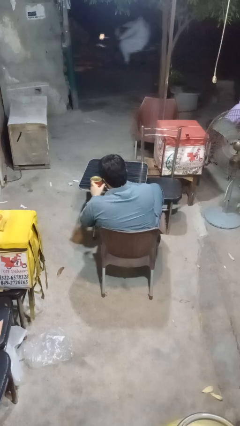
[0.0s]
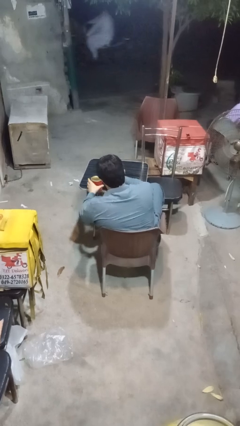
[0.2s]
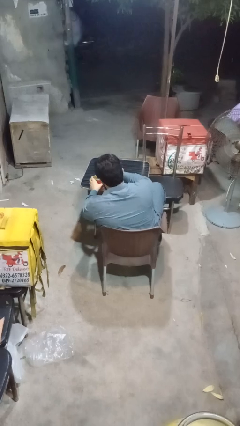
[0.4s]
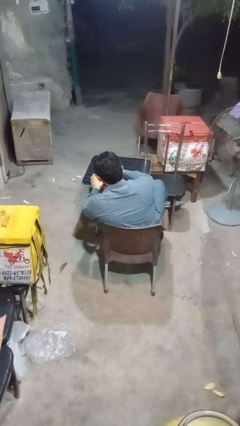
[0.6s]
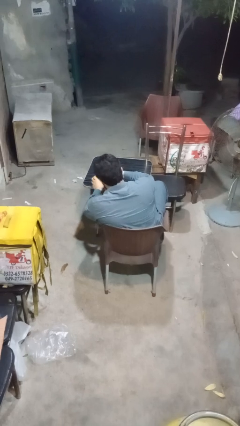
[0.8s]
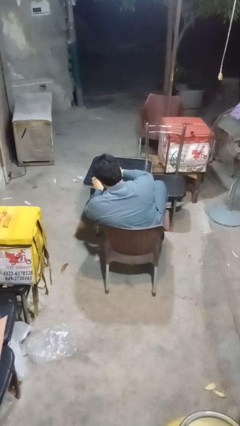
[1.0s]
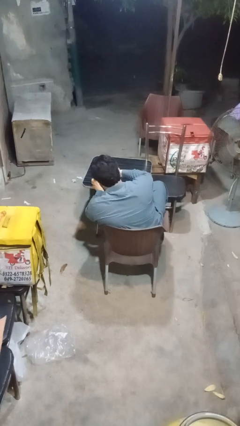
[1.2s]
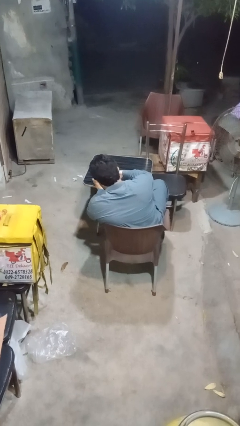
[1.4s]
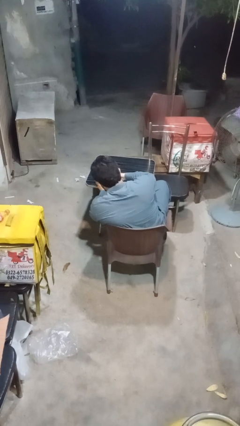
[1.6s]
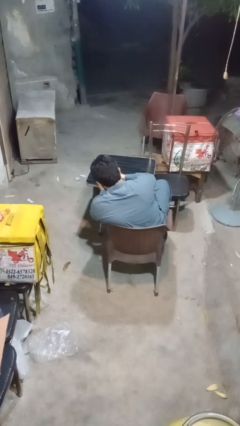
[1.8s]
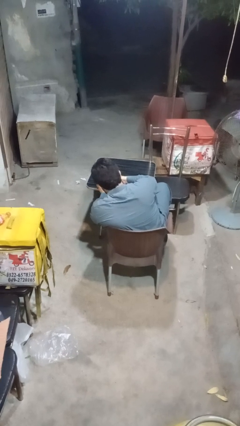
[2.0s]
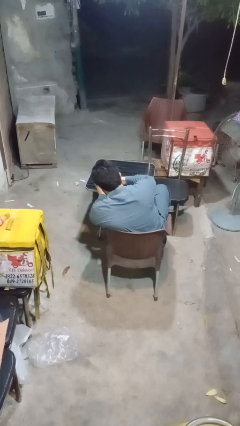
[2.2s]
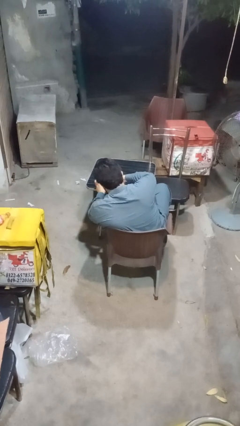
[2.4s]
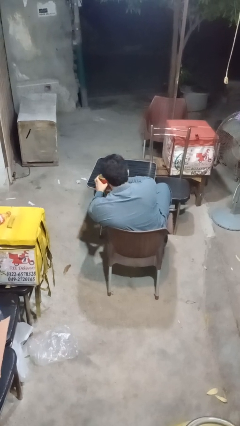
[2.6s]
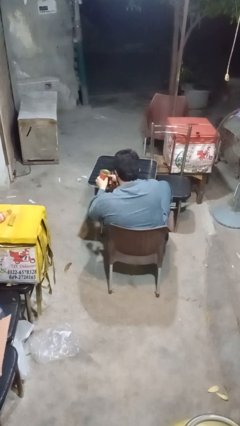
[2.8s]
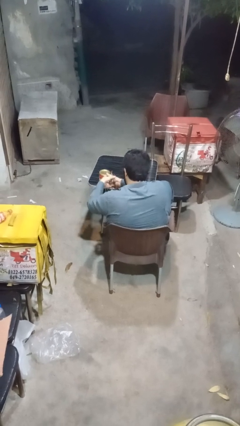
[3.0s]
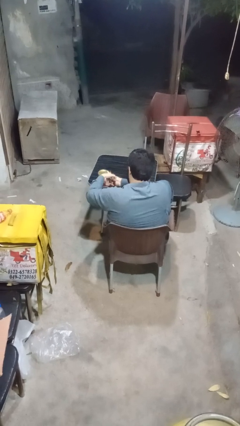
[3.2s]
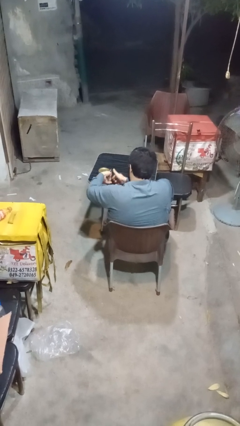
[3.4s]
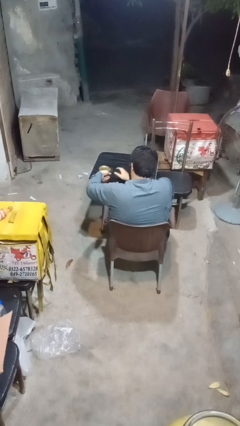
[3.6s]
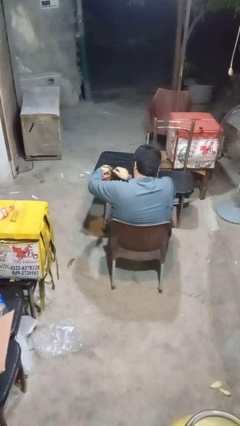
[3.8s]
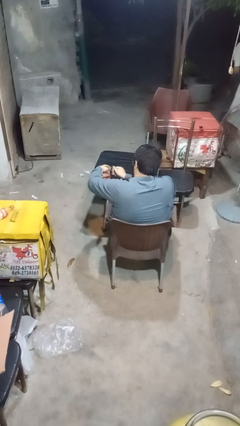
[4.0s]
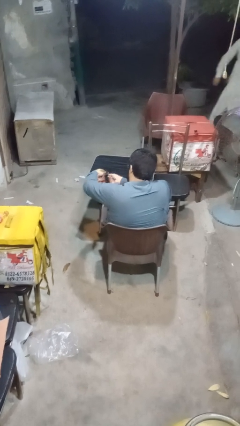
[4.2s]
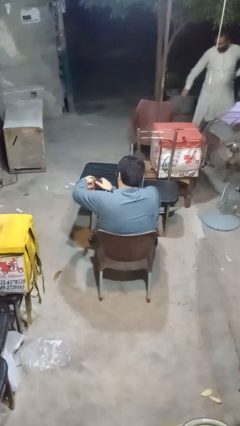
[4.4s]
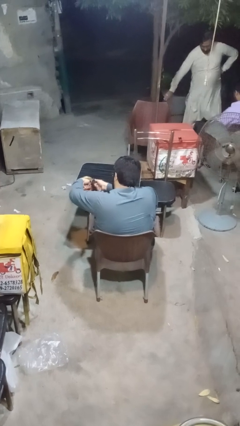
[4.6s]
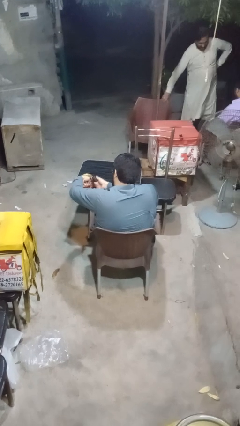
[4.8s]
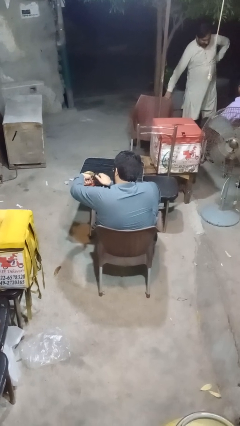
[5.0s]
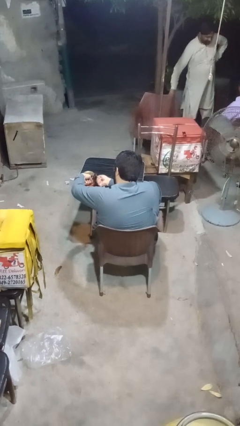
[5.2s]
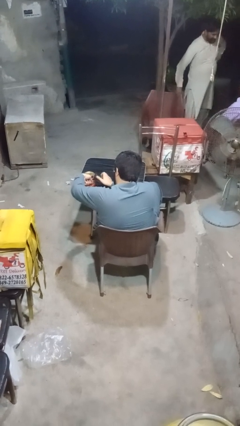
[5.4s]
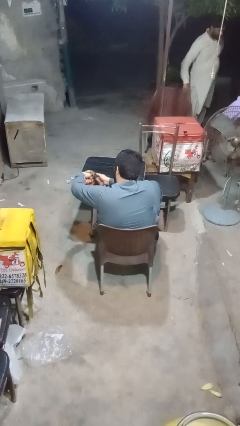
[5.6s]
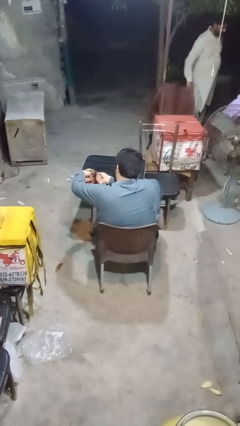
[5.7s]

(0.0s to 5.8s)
person opens can with can opener

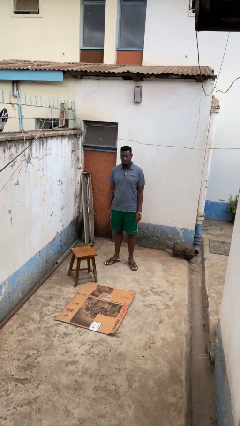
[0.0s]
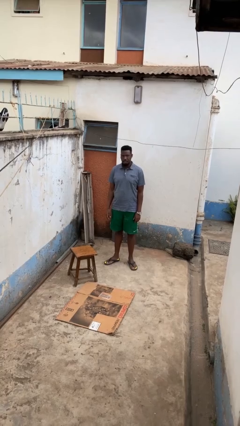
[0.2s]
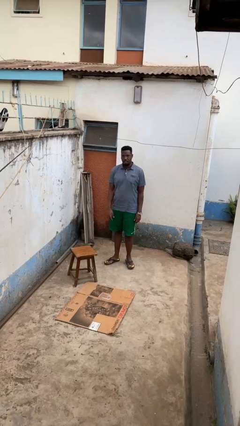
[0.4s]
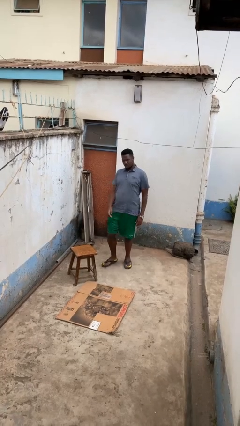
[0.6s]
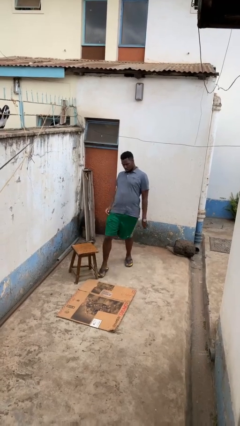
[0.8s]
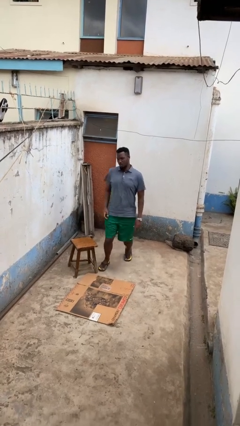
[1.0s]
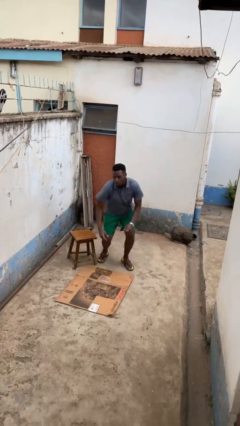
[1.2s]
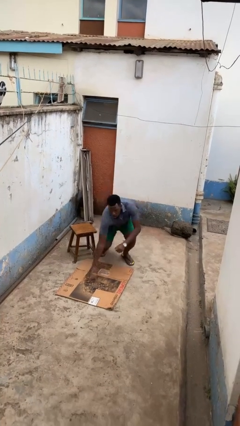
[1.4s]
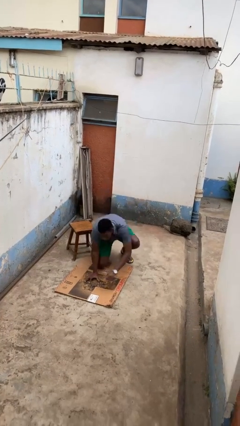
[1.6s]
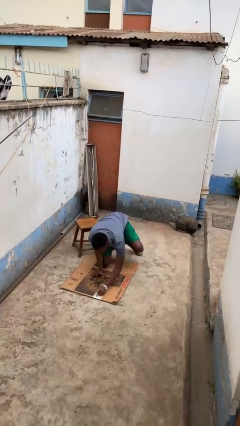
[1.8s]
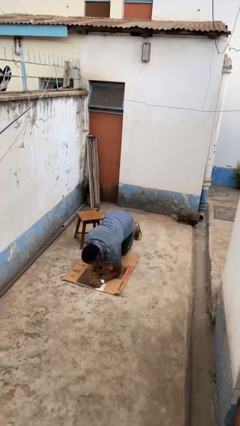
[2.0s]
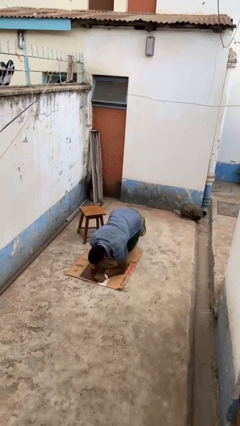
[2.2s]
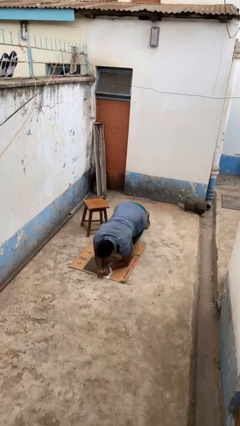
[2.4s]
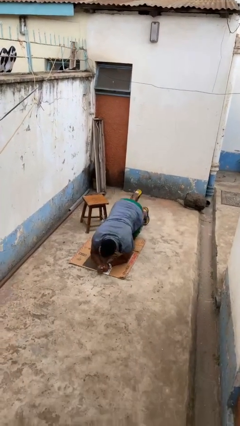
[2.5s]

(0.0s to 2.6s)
person trips on object on floor

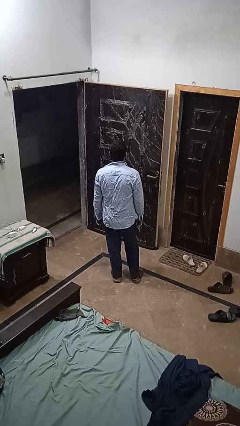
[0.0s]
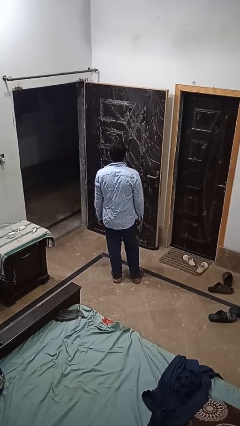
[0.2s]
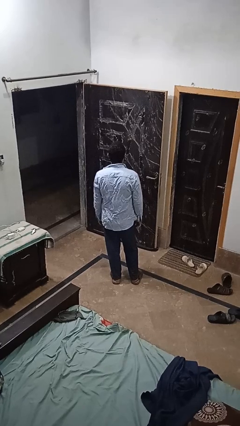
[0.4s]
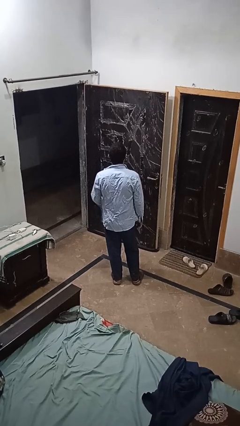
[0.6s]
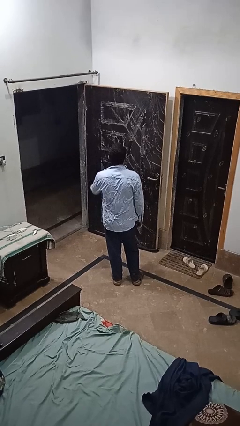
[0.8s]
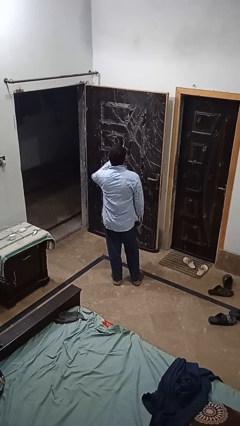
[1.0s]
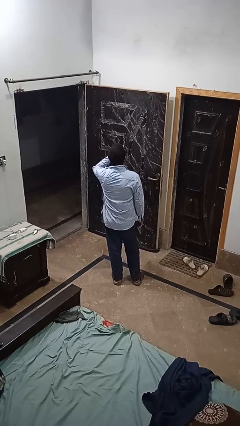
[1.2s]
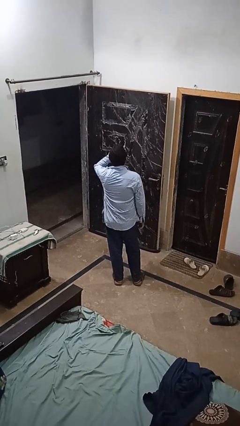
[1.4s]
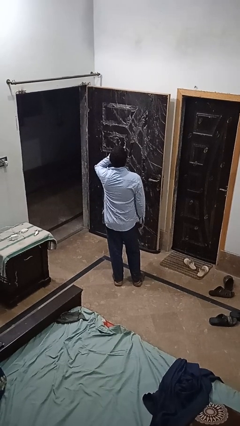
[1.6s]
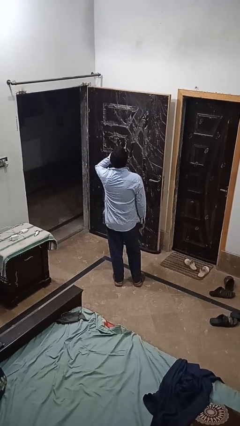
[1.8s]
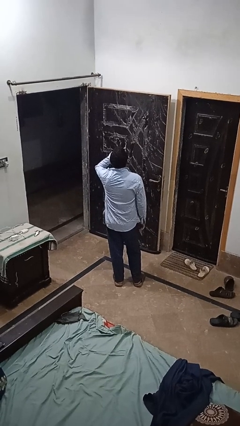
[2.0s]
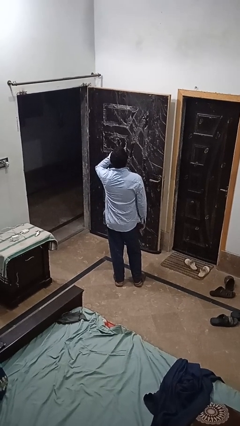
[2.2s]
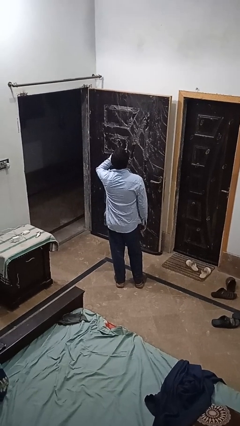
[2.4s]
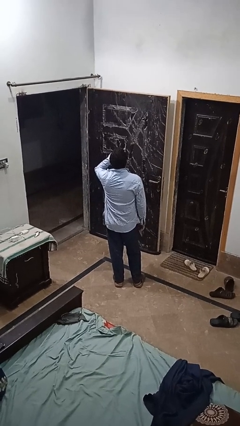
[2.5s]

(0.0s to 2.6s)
person yawns

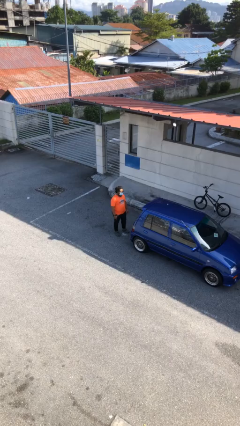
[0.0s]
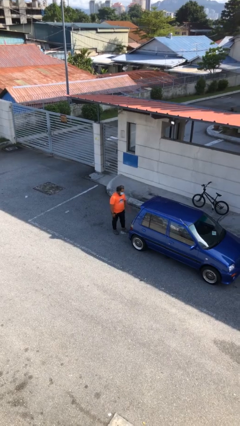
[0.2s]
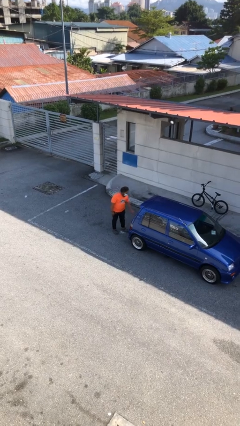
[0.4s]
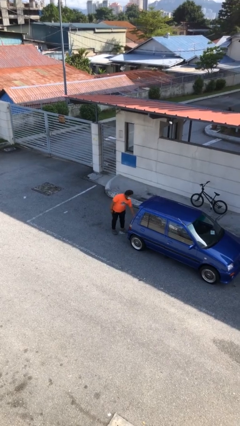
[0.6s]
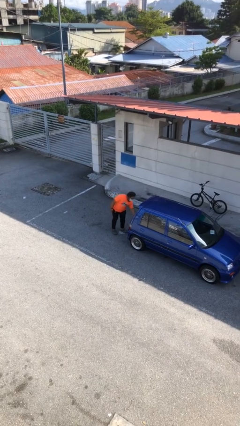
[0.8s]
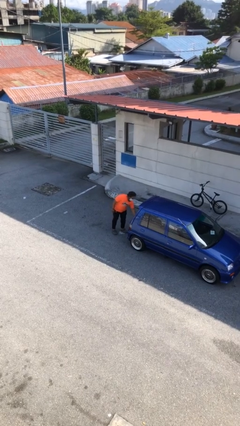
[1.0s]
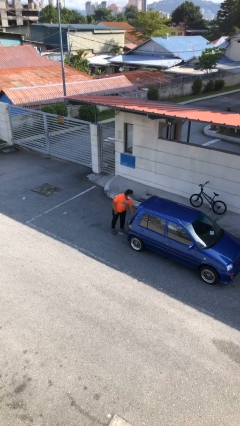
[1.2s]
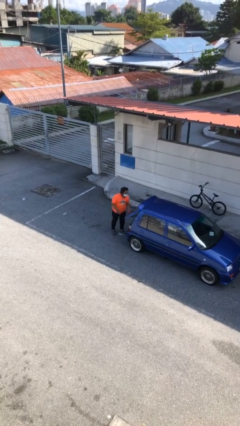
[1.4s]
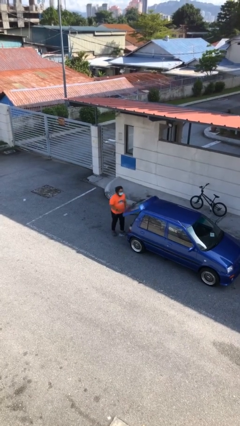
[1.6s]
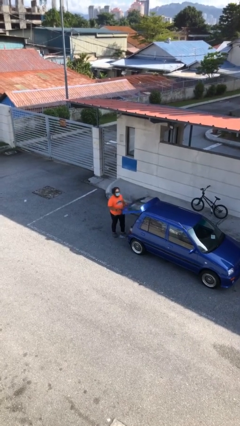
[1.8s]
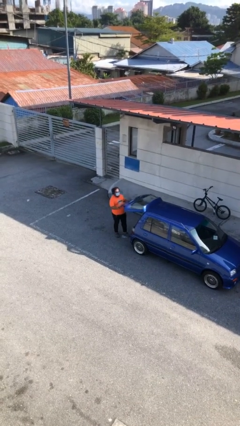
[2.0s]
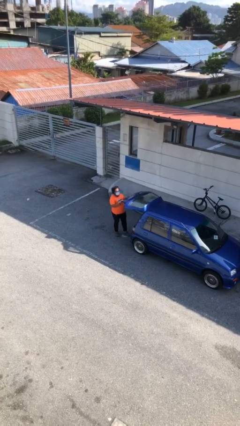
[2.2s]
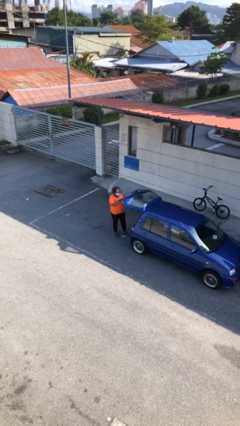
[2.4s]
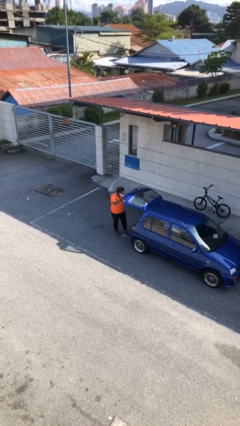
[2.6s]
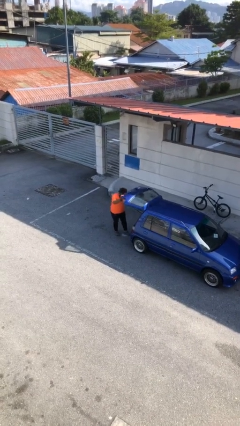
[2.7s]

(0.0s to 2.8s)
person opens car trunk

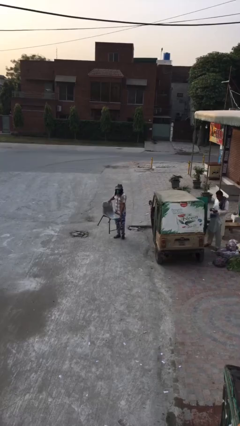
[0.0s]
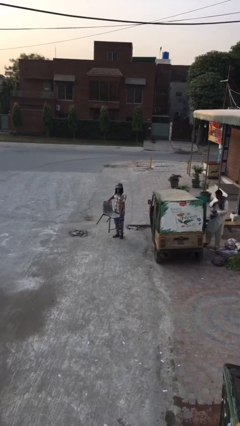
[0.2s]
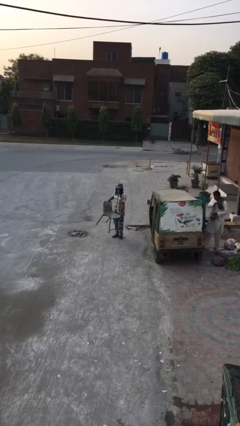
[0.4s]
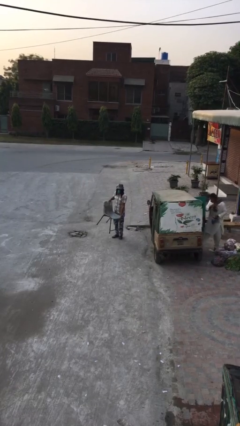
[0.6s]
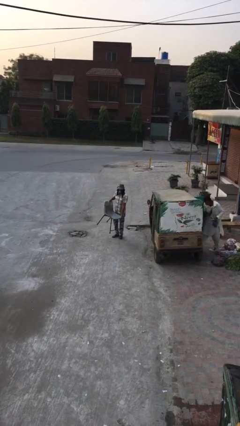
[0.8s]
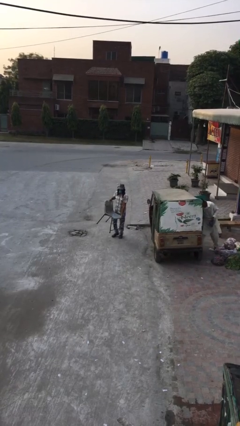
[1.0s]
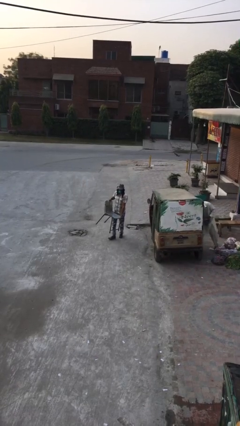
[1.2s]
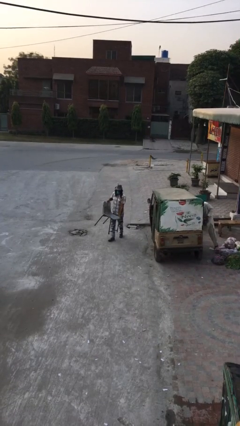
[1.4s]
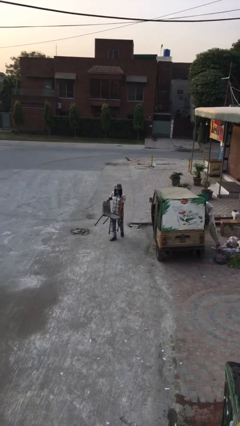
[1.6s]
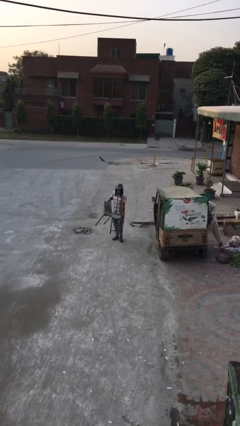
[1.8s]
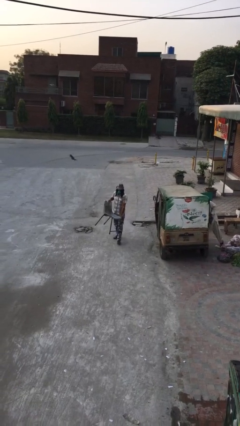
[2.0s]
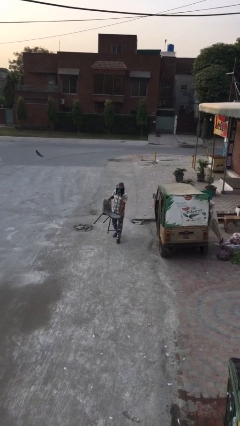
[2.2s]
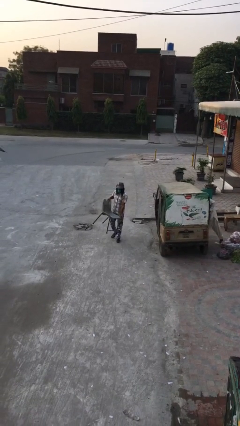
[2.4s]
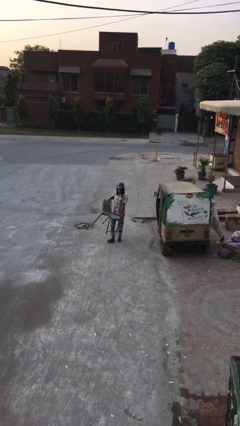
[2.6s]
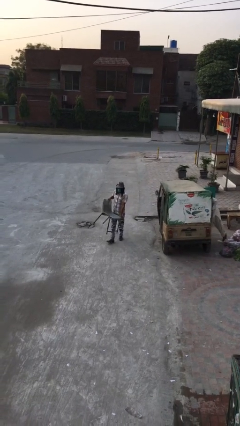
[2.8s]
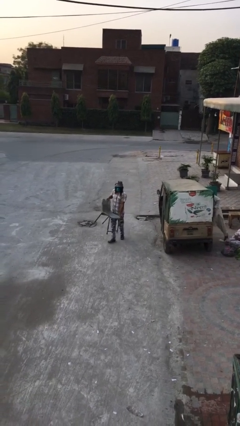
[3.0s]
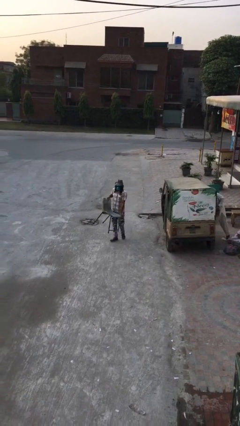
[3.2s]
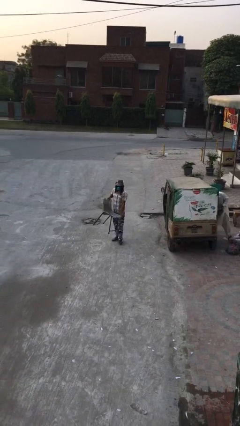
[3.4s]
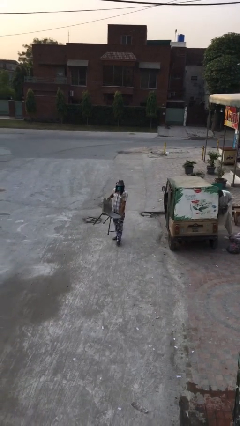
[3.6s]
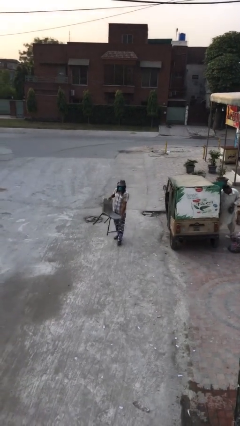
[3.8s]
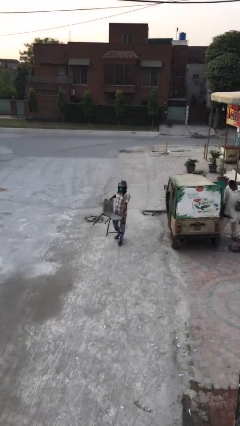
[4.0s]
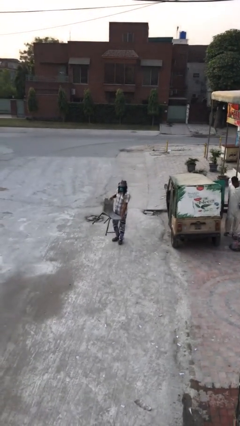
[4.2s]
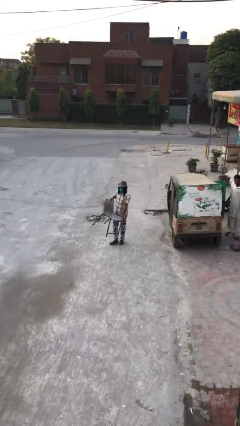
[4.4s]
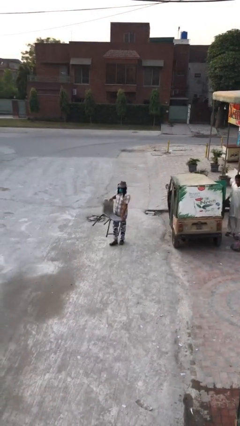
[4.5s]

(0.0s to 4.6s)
person carries heavy object
